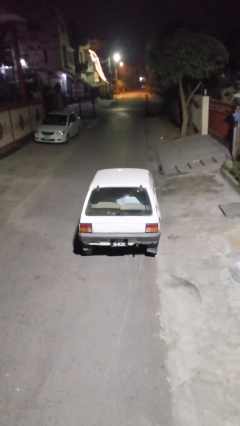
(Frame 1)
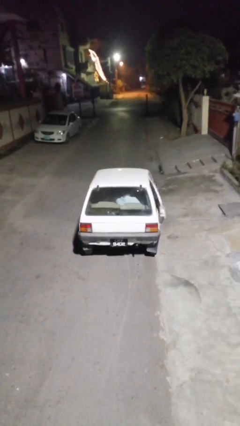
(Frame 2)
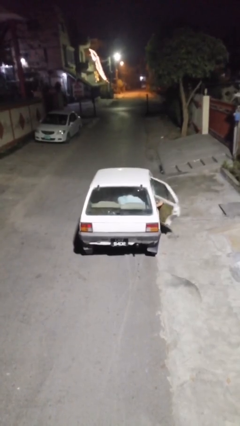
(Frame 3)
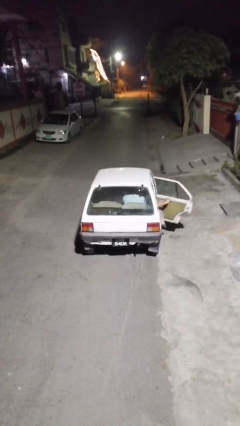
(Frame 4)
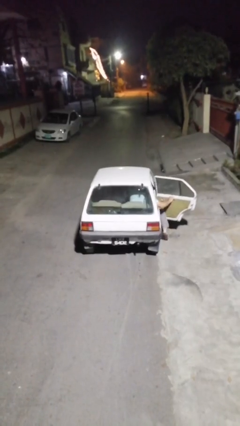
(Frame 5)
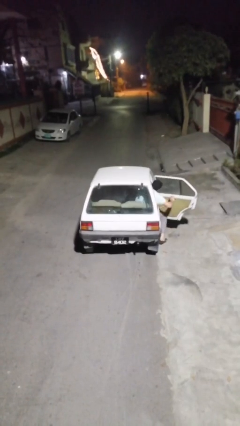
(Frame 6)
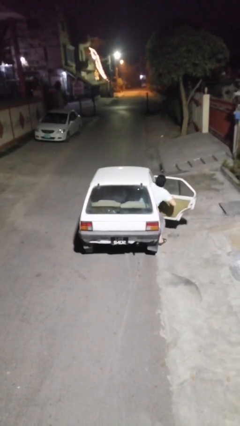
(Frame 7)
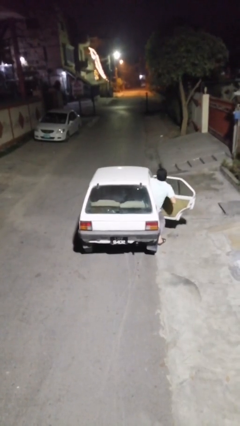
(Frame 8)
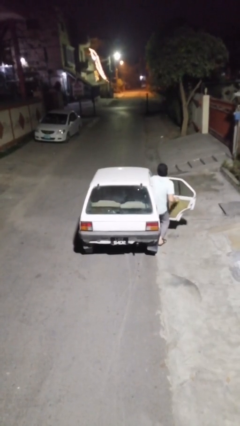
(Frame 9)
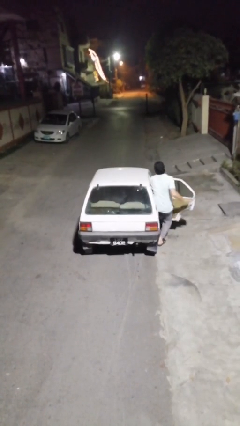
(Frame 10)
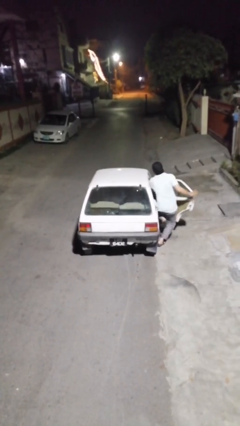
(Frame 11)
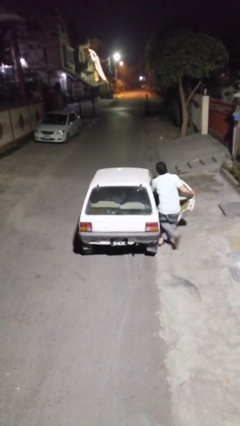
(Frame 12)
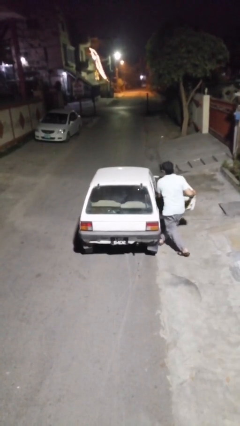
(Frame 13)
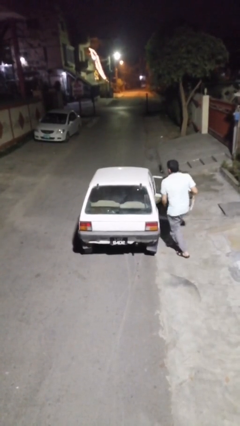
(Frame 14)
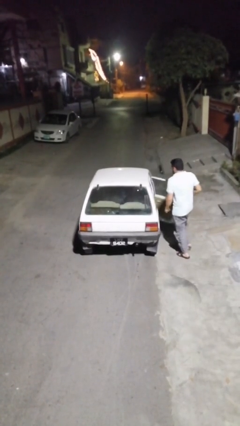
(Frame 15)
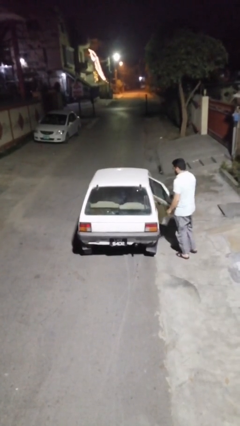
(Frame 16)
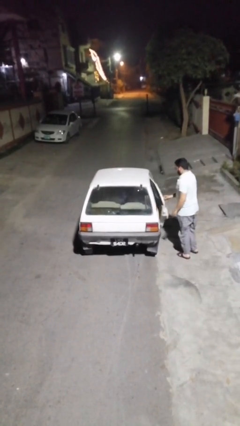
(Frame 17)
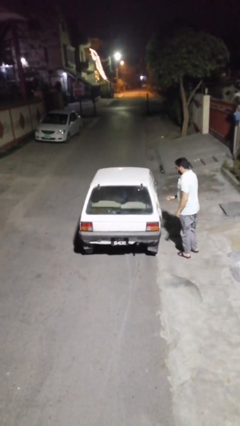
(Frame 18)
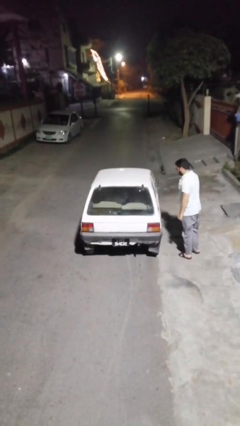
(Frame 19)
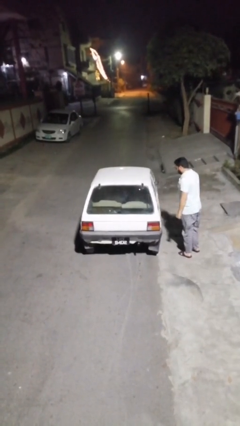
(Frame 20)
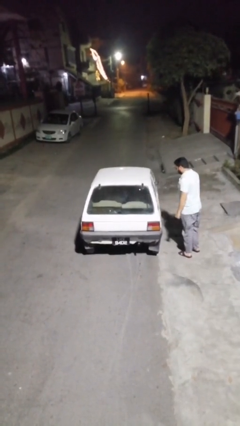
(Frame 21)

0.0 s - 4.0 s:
car drops off person

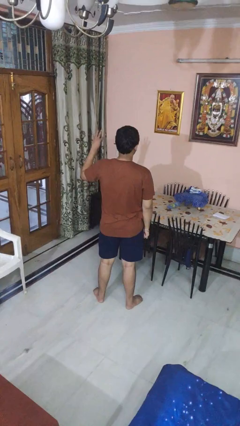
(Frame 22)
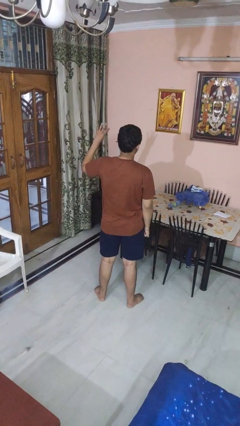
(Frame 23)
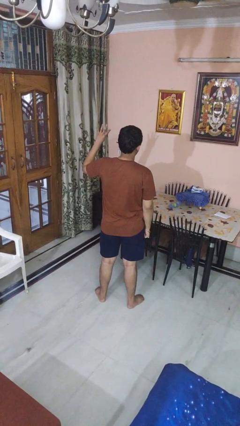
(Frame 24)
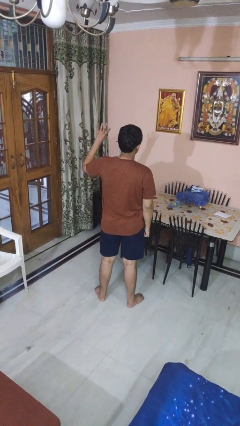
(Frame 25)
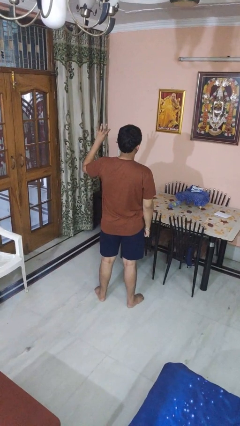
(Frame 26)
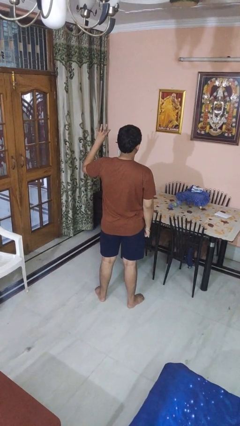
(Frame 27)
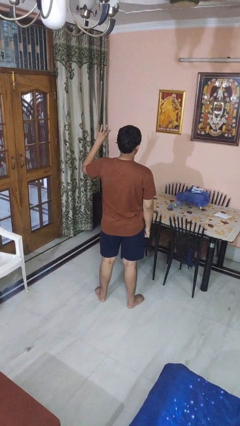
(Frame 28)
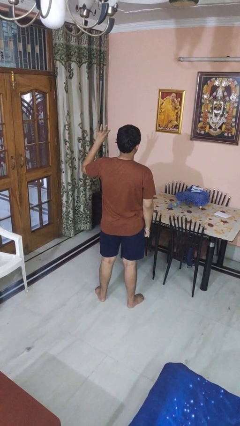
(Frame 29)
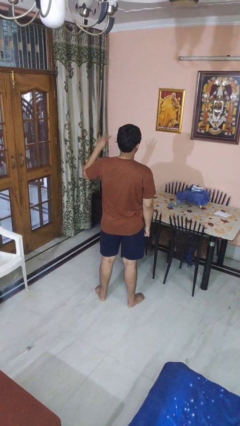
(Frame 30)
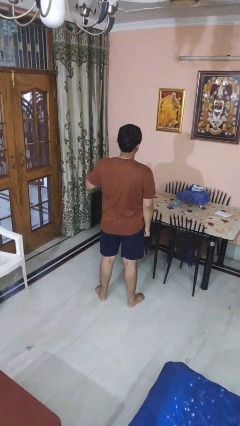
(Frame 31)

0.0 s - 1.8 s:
person gestures number four

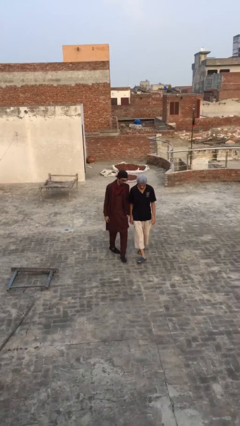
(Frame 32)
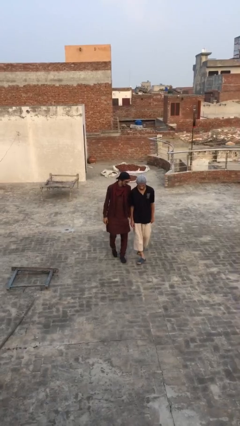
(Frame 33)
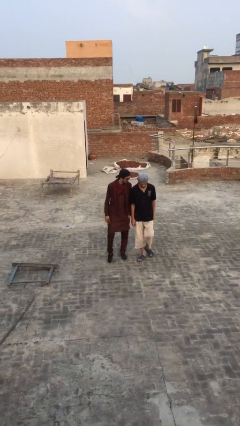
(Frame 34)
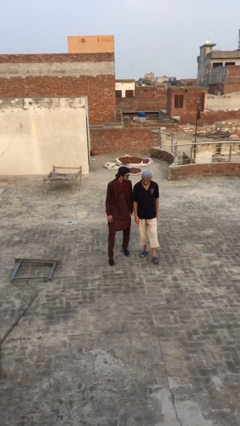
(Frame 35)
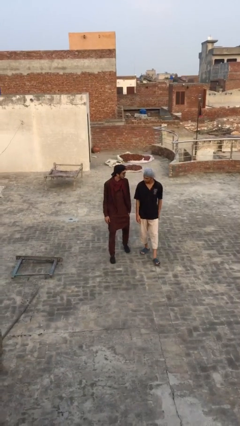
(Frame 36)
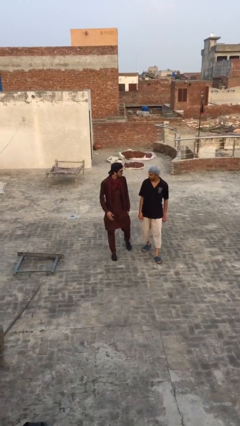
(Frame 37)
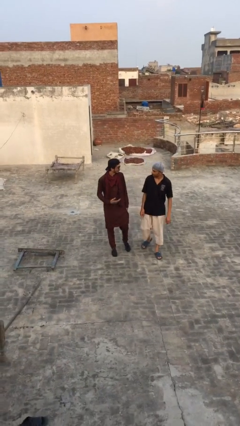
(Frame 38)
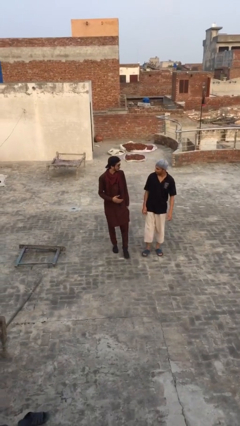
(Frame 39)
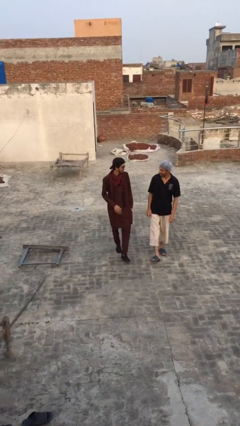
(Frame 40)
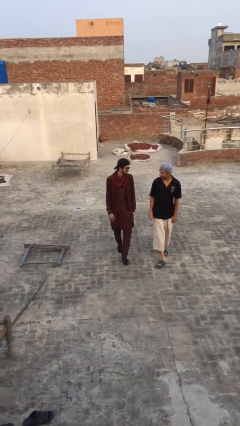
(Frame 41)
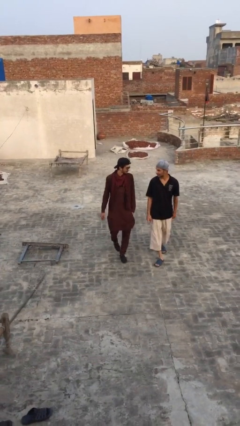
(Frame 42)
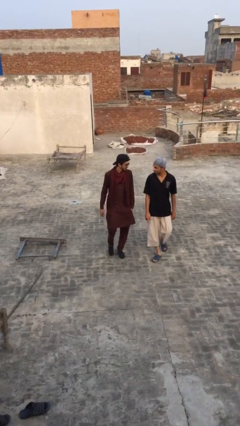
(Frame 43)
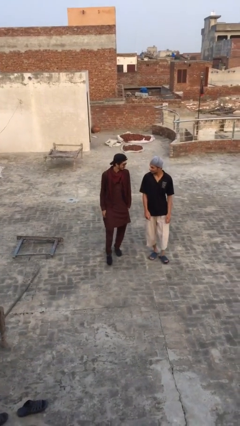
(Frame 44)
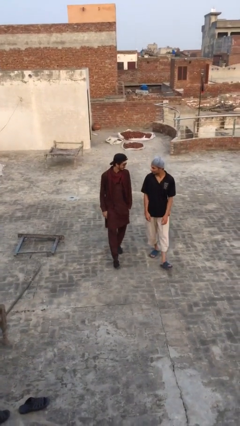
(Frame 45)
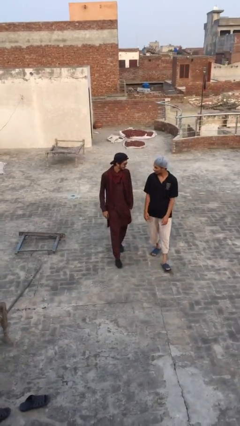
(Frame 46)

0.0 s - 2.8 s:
person talks to person

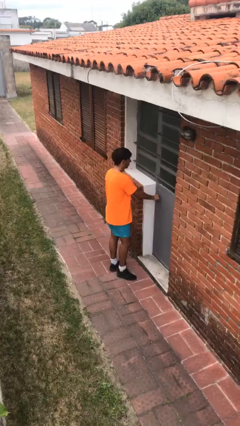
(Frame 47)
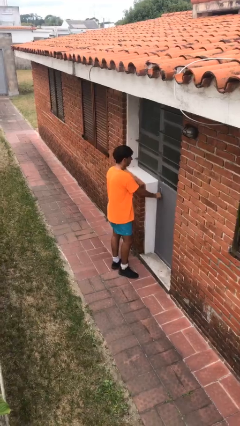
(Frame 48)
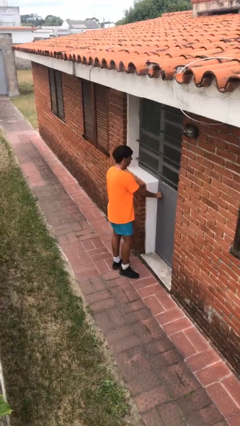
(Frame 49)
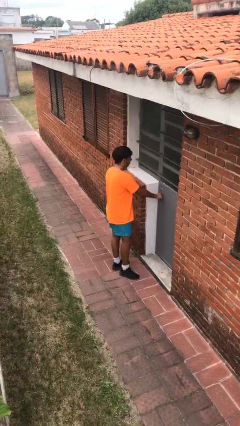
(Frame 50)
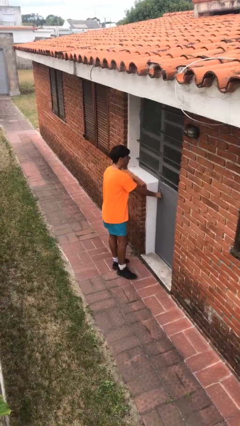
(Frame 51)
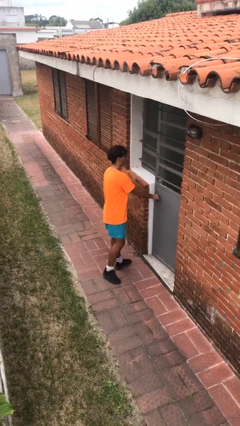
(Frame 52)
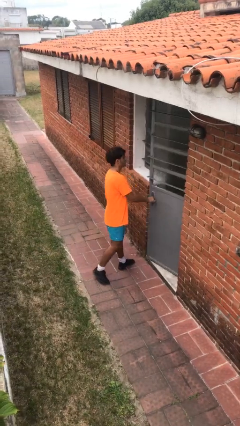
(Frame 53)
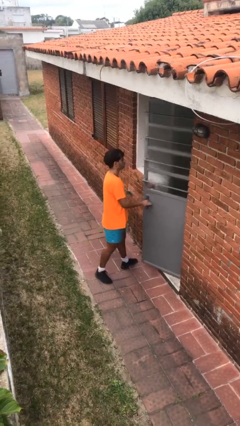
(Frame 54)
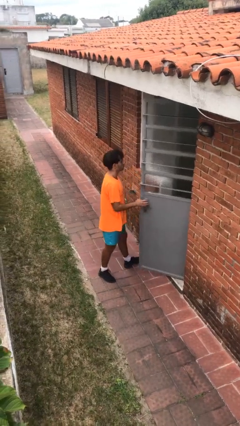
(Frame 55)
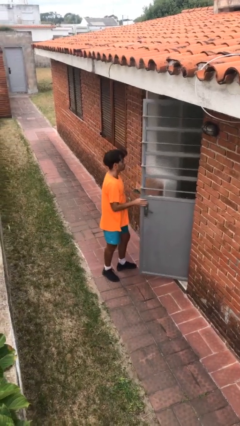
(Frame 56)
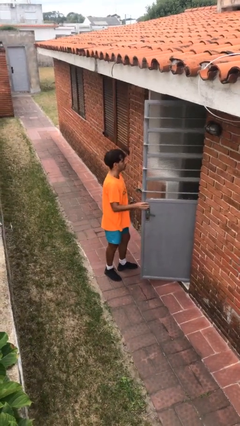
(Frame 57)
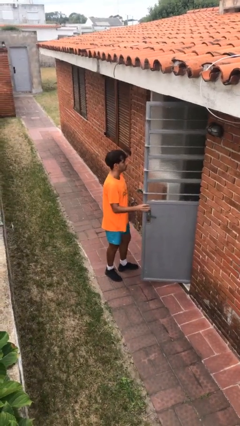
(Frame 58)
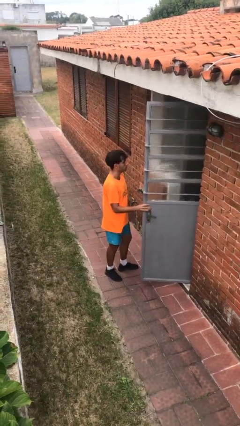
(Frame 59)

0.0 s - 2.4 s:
person opens facility door

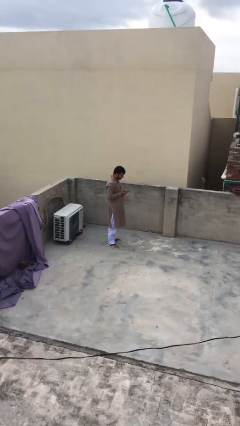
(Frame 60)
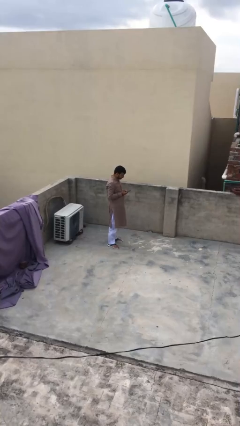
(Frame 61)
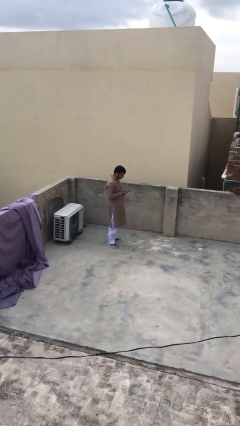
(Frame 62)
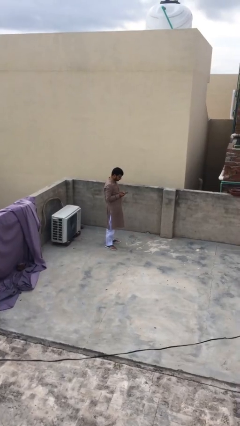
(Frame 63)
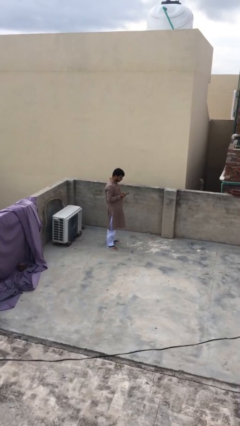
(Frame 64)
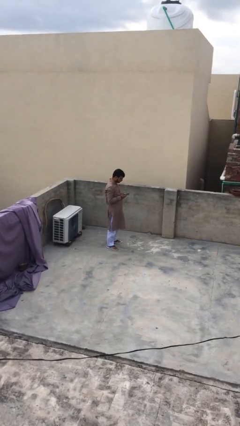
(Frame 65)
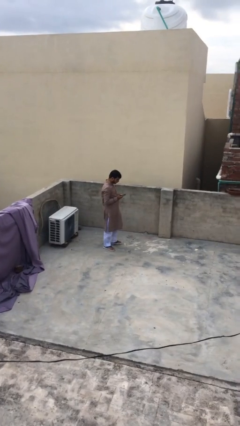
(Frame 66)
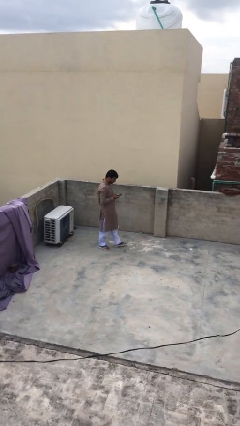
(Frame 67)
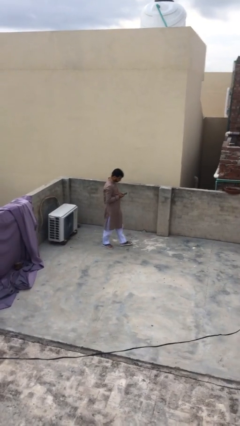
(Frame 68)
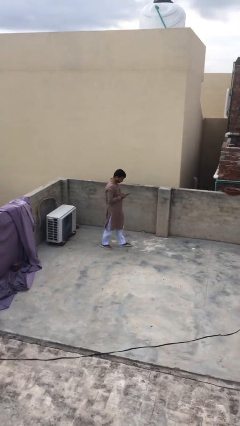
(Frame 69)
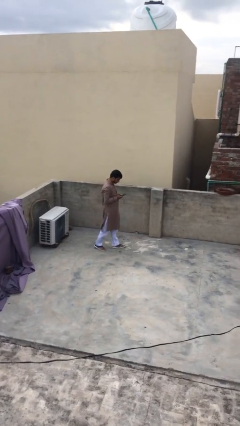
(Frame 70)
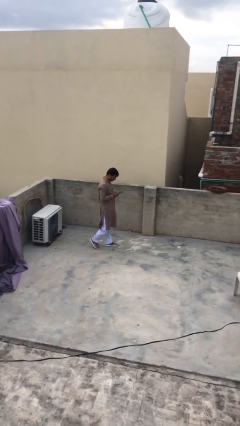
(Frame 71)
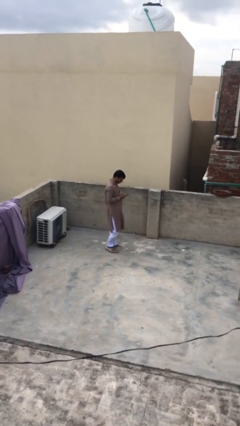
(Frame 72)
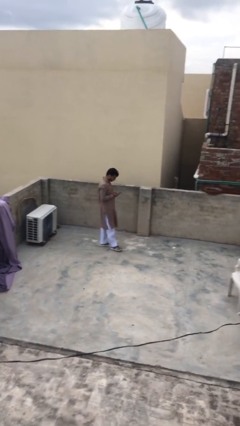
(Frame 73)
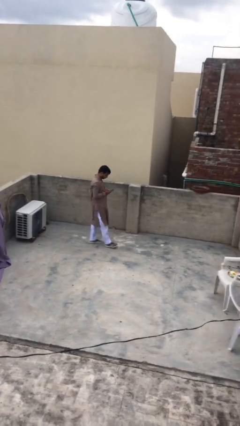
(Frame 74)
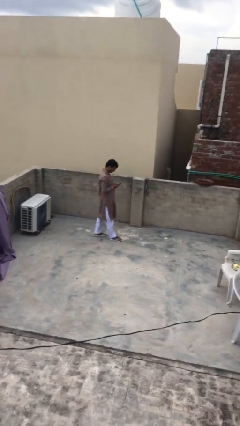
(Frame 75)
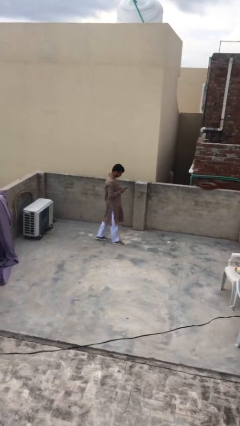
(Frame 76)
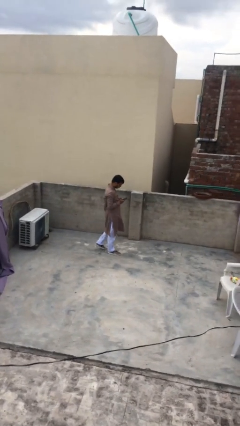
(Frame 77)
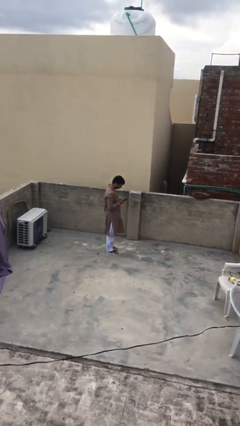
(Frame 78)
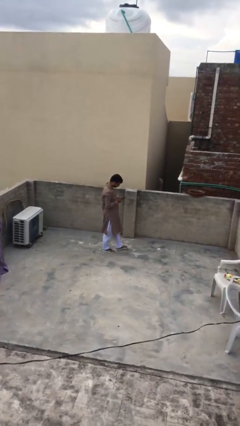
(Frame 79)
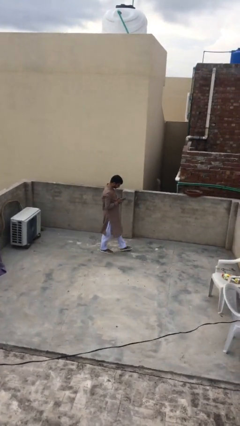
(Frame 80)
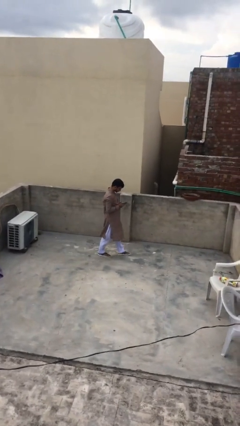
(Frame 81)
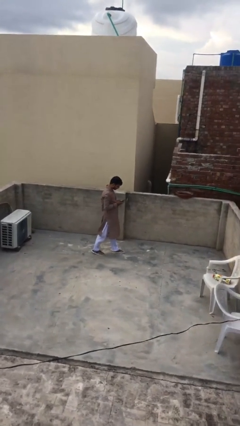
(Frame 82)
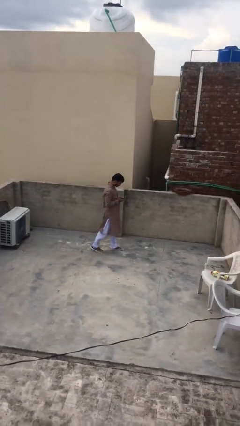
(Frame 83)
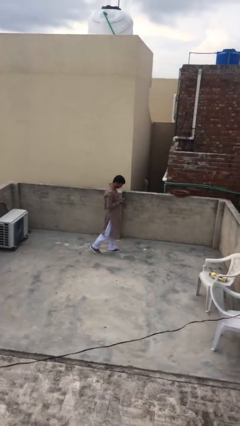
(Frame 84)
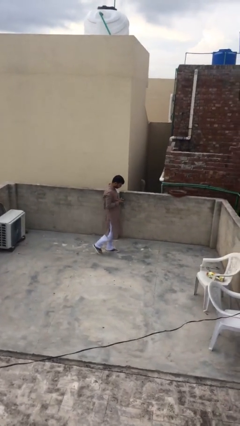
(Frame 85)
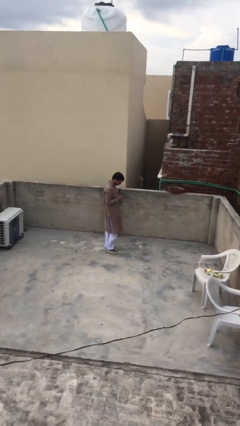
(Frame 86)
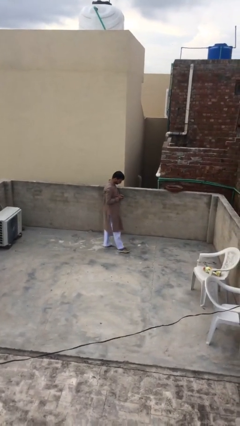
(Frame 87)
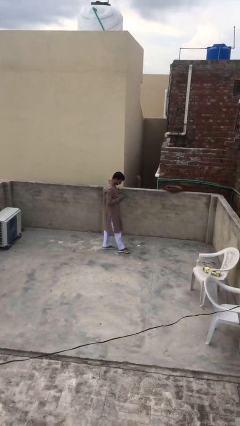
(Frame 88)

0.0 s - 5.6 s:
person texts on phone

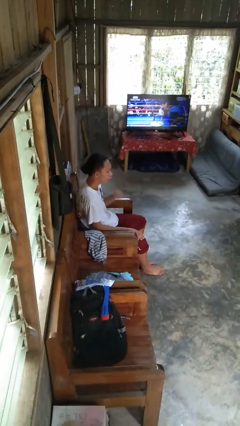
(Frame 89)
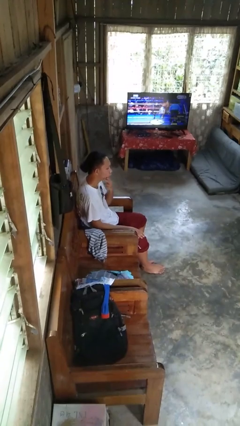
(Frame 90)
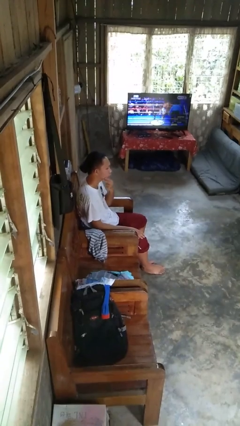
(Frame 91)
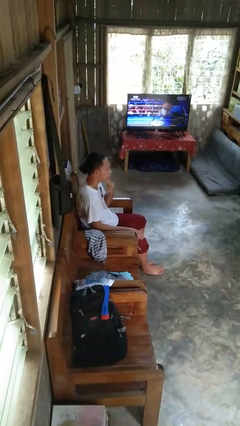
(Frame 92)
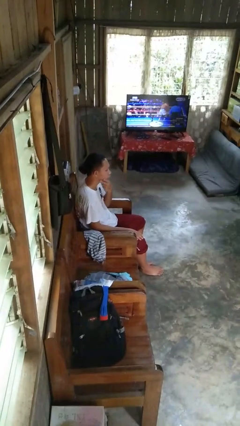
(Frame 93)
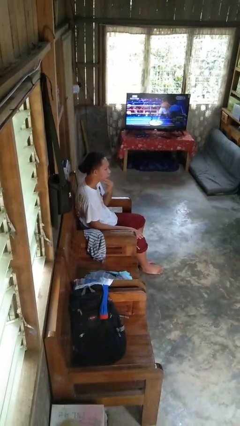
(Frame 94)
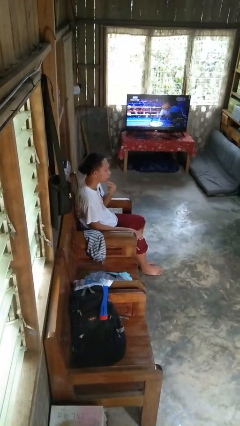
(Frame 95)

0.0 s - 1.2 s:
person strokes chin
